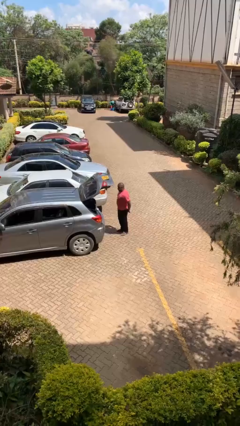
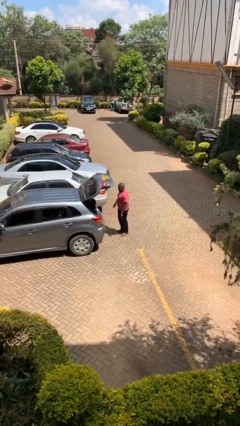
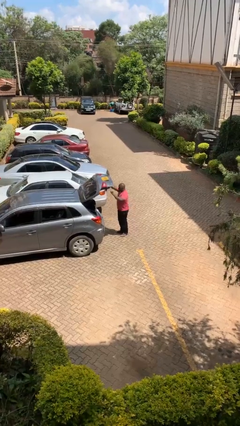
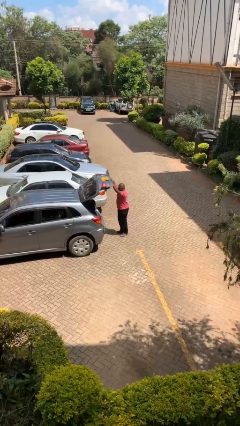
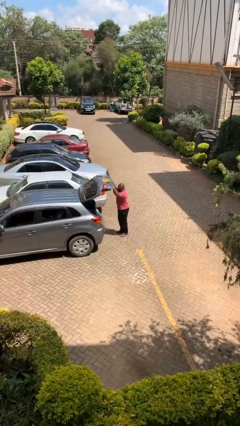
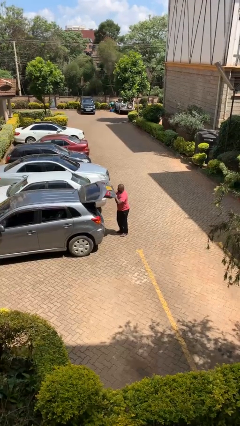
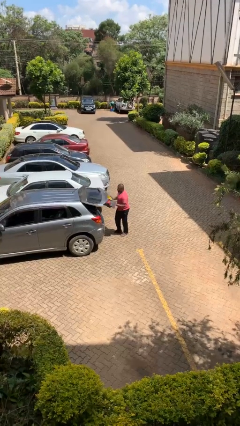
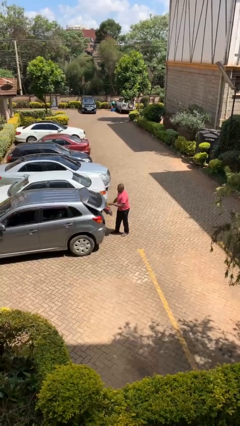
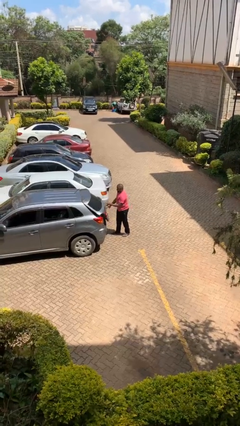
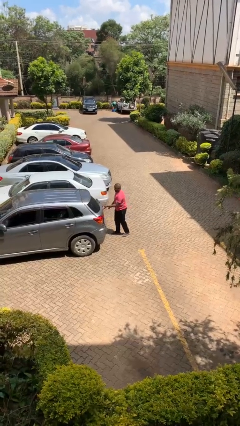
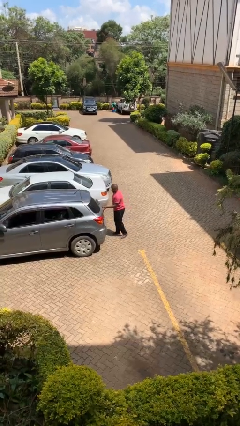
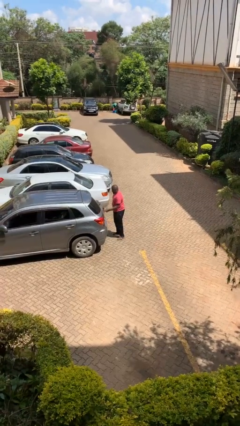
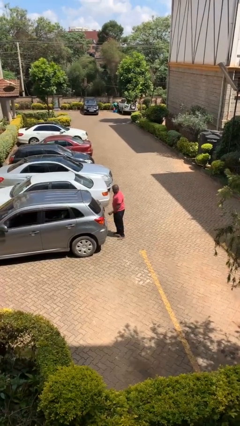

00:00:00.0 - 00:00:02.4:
person closes car trunk

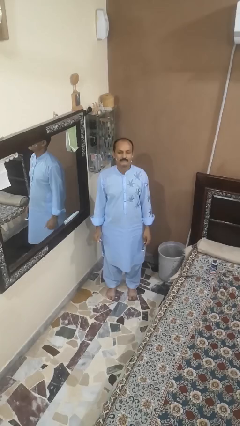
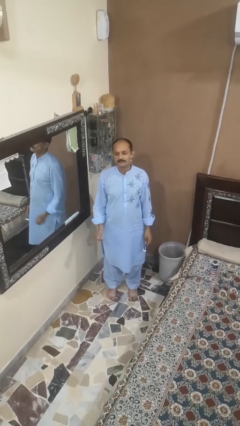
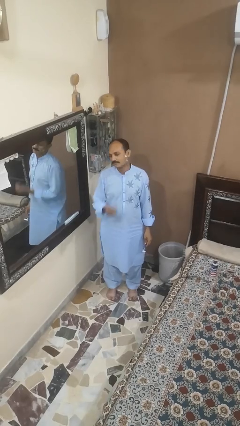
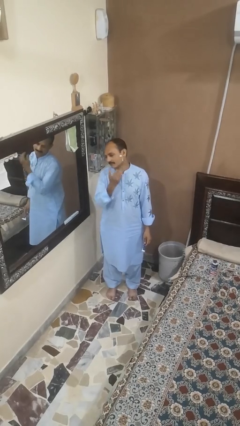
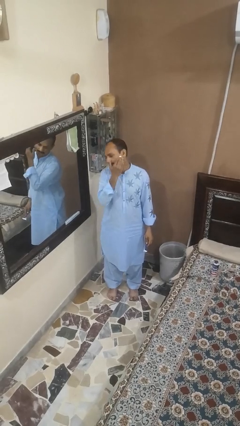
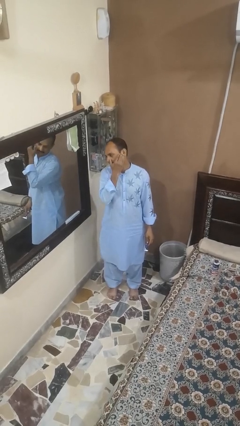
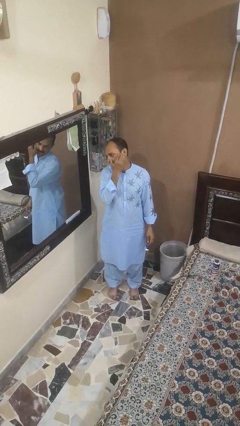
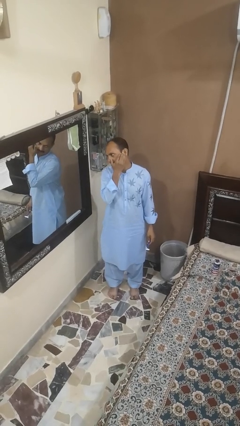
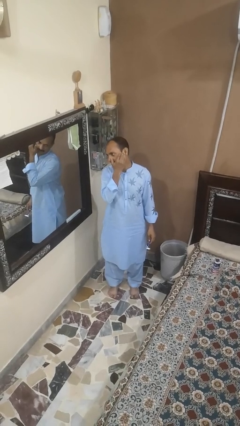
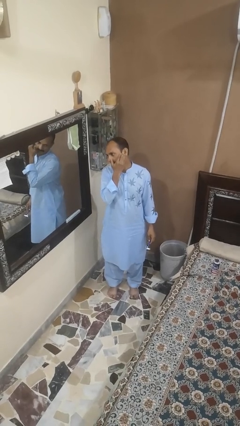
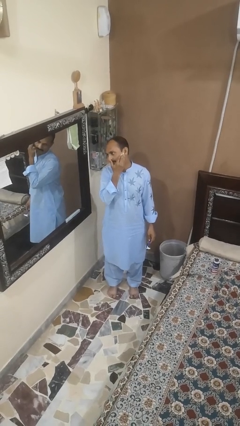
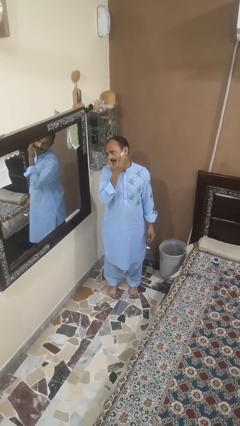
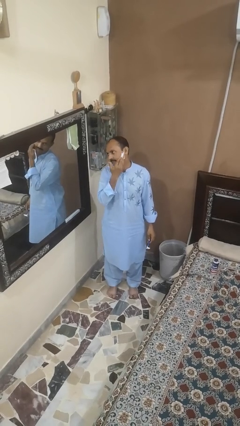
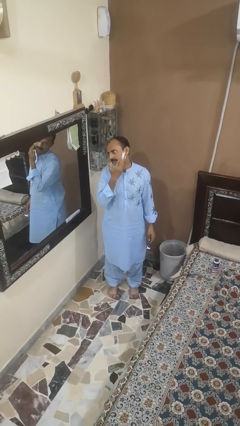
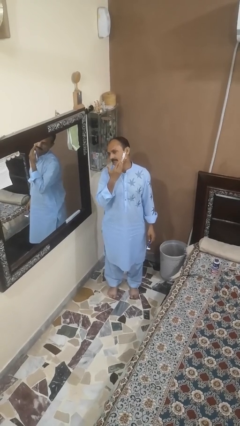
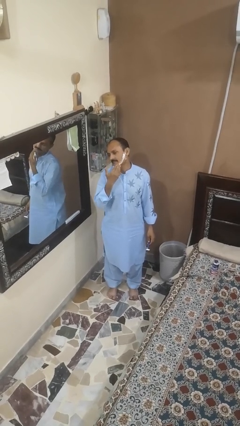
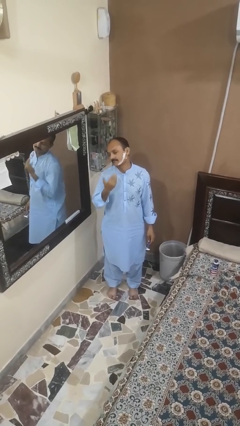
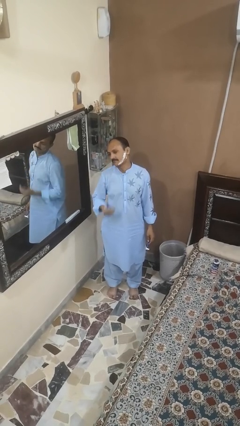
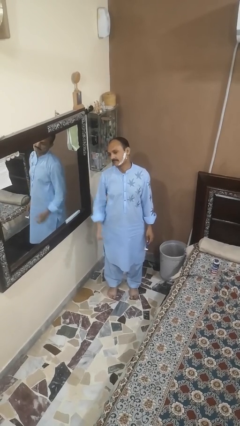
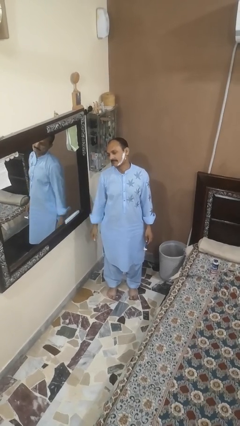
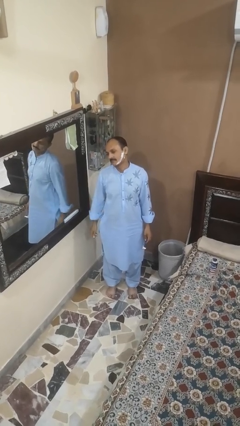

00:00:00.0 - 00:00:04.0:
person applies shaving cream

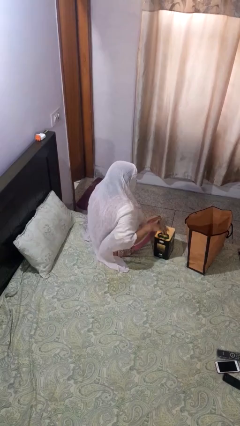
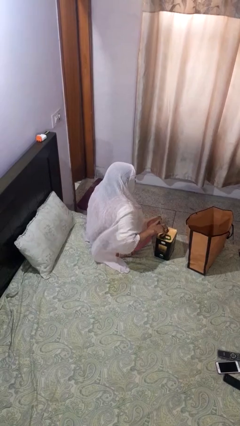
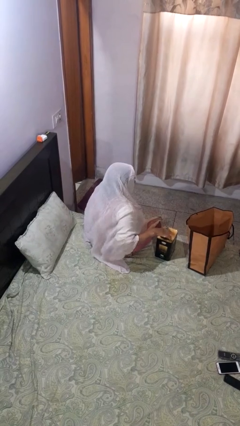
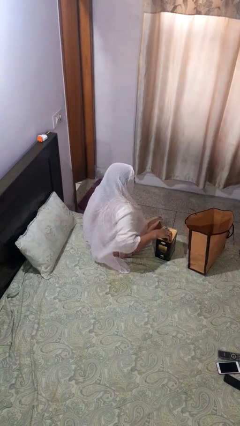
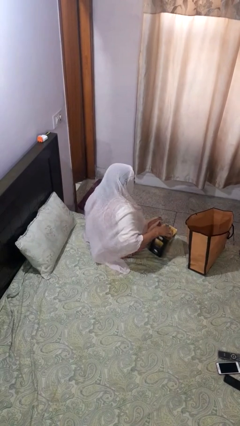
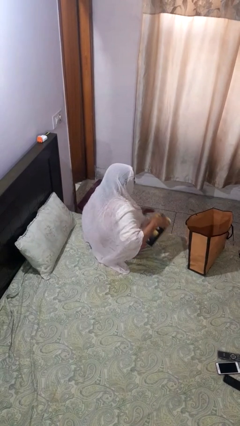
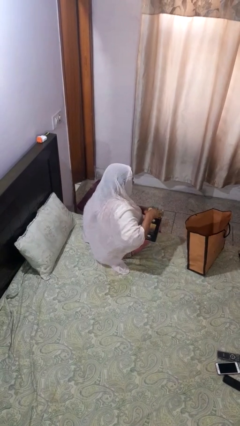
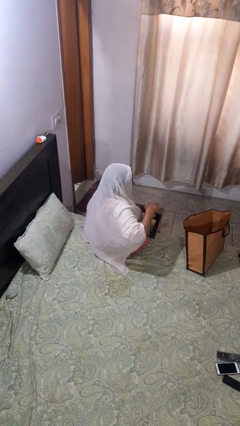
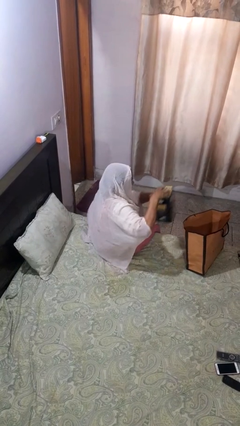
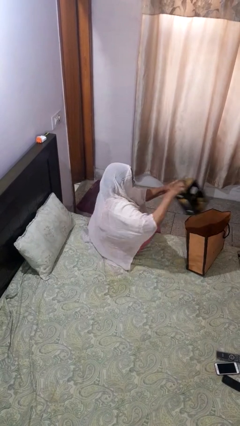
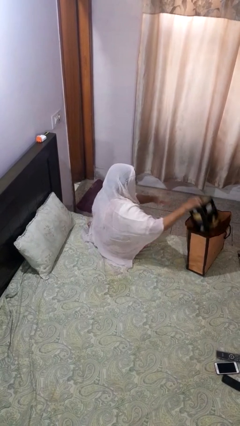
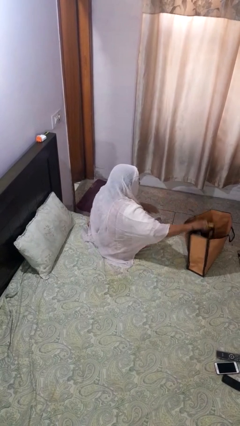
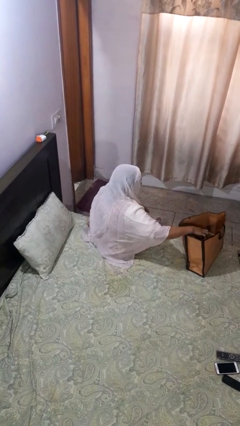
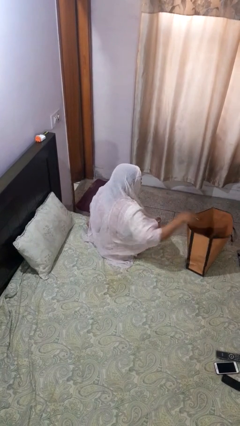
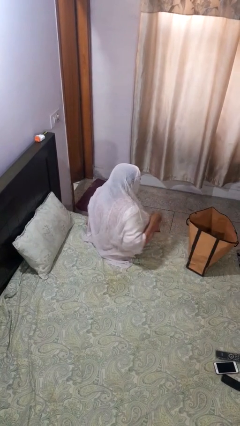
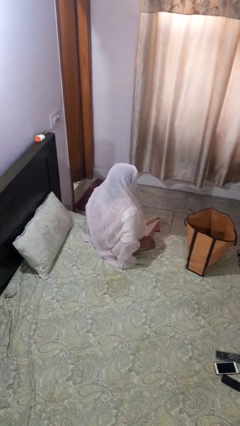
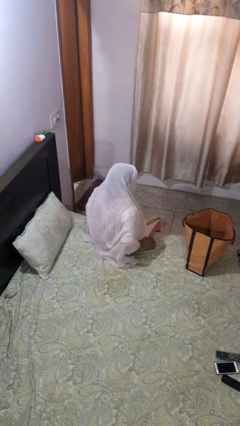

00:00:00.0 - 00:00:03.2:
person puts object into bag

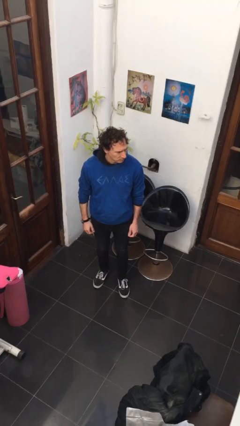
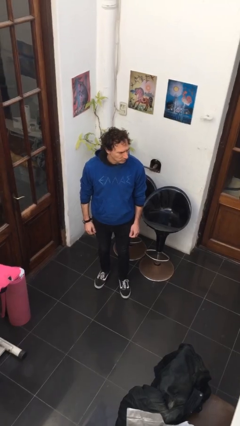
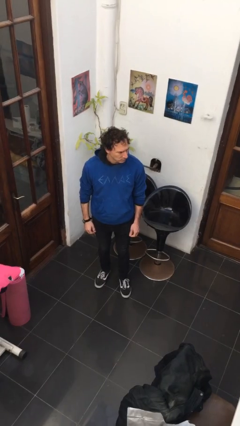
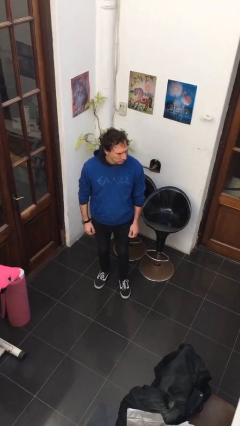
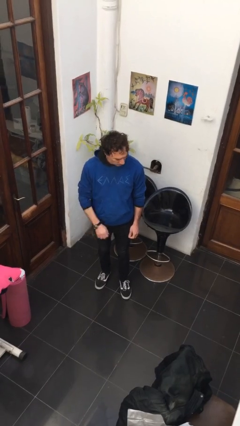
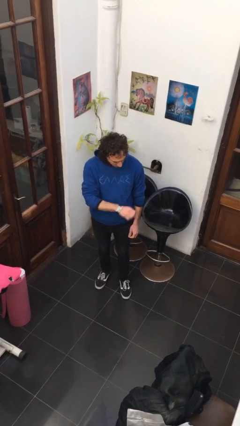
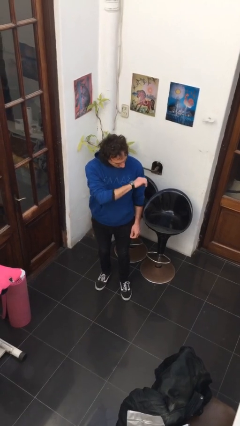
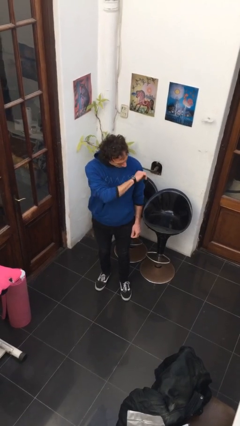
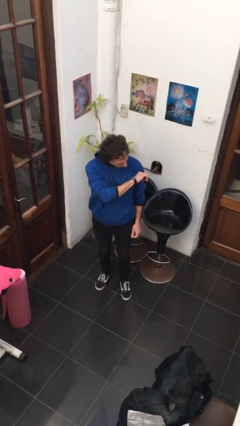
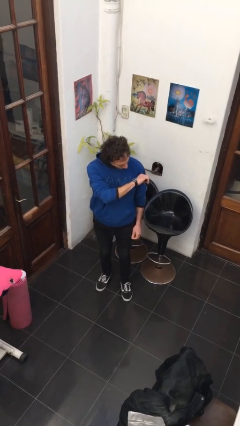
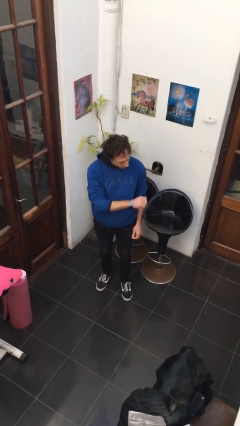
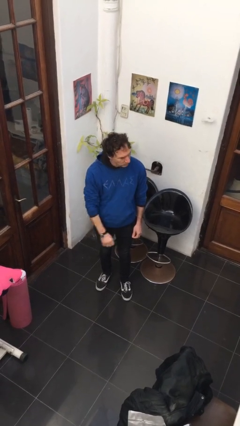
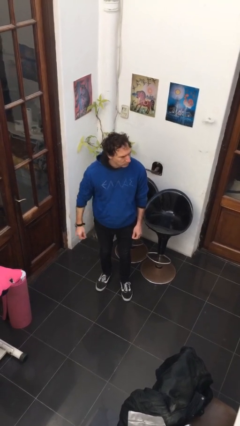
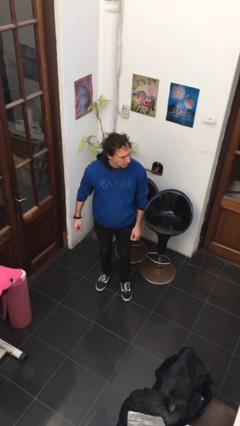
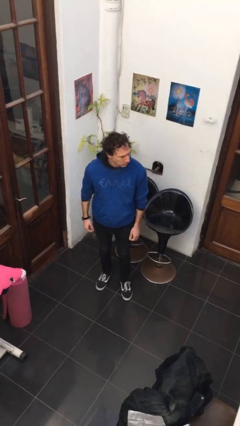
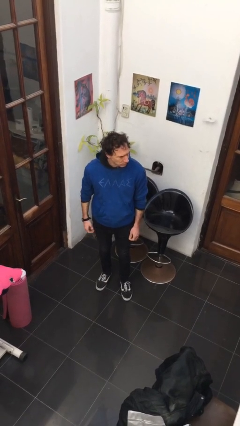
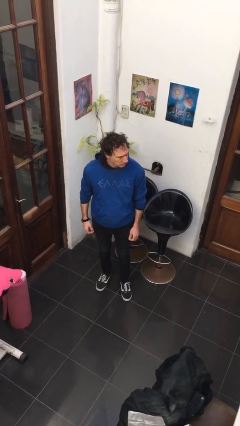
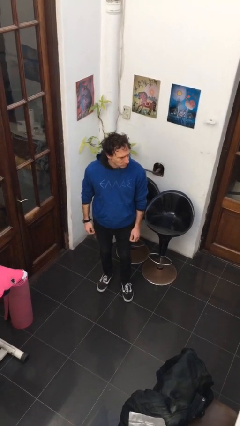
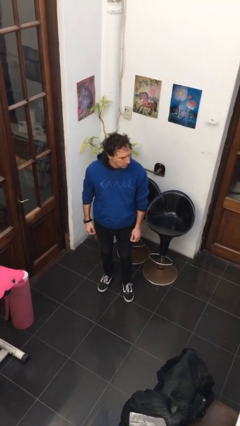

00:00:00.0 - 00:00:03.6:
person looks at wristwatch

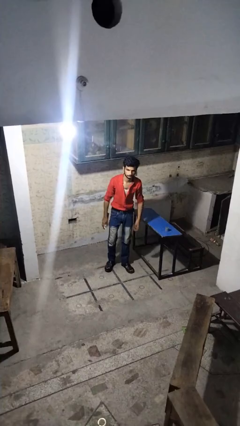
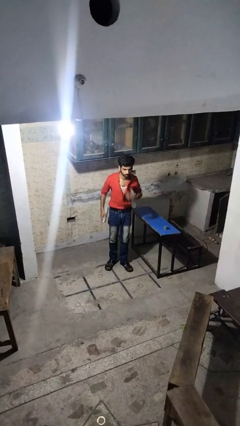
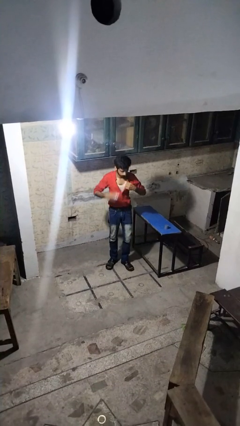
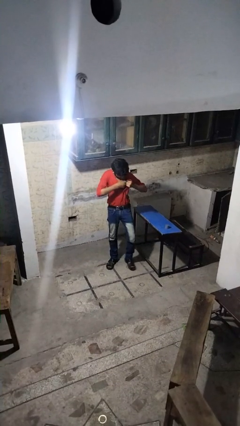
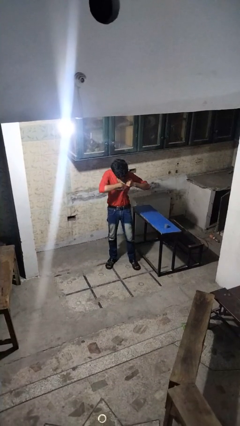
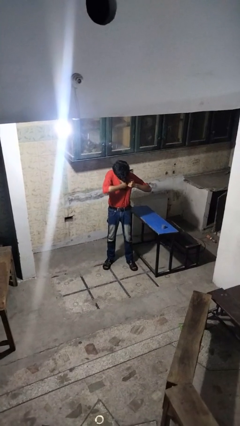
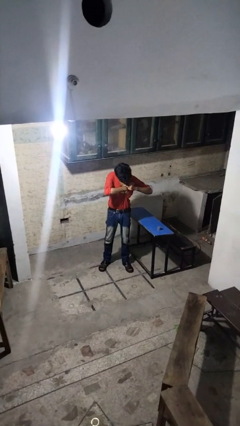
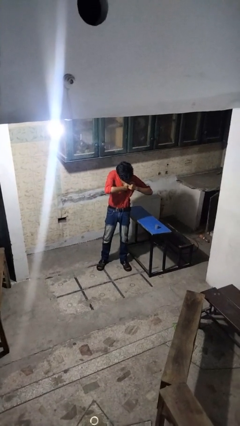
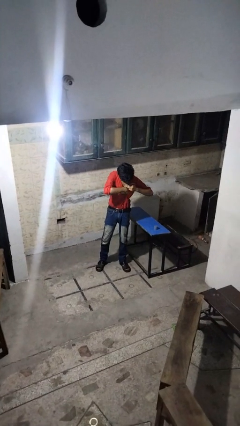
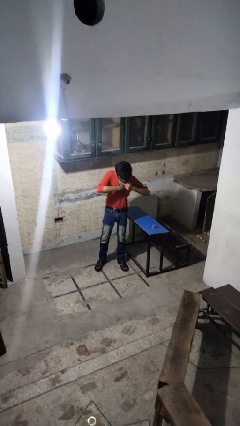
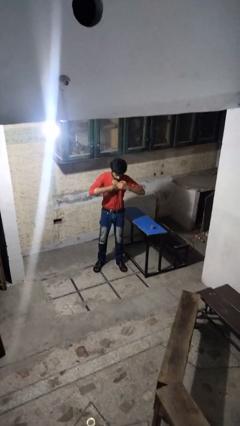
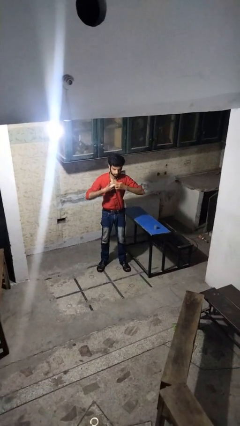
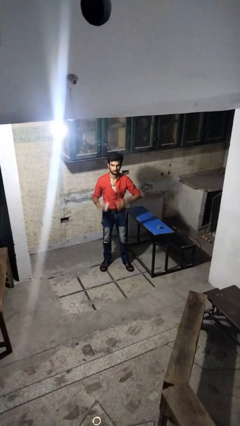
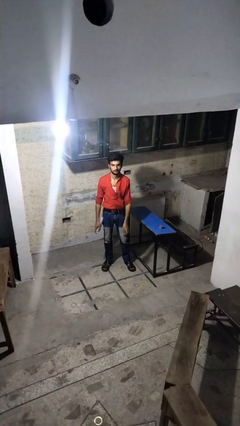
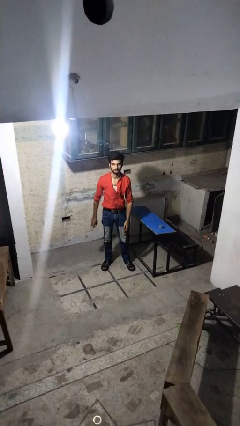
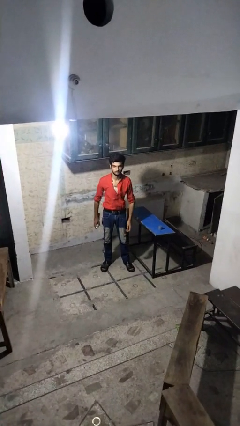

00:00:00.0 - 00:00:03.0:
person applies deodorant

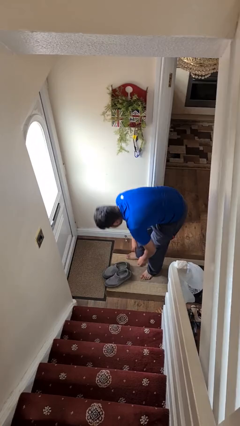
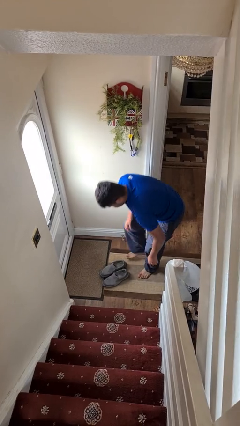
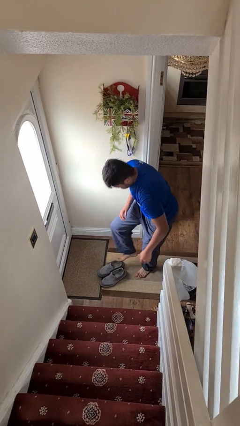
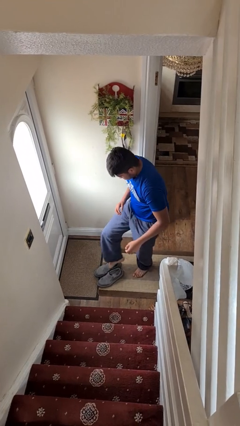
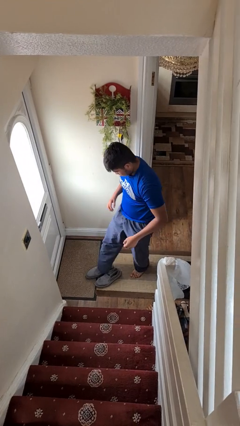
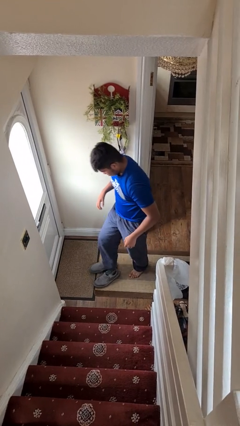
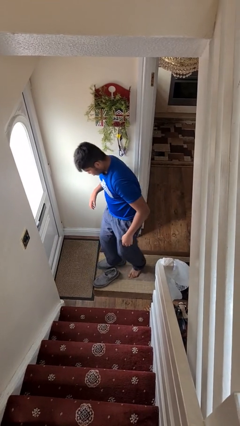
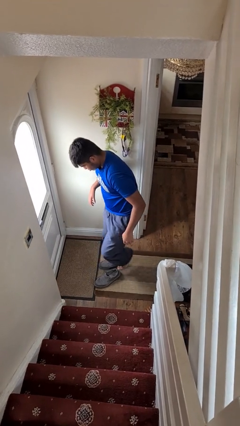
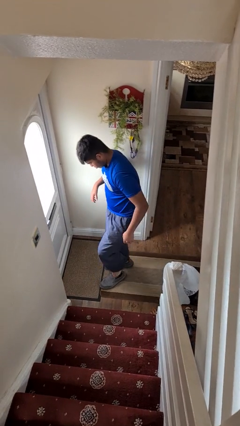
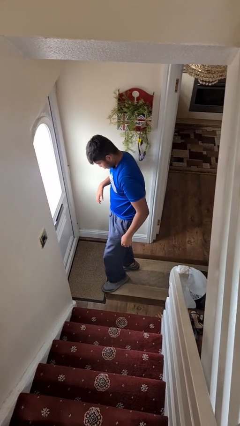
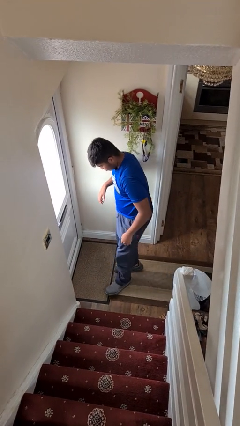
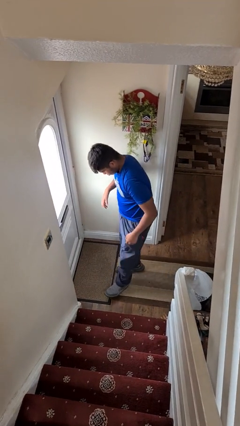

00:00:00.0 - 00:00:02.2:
person puts on shoes
